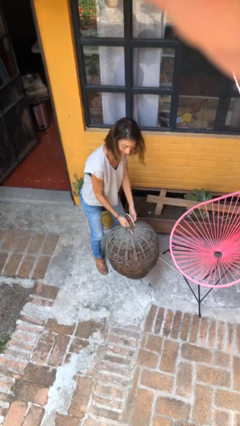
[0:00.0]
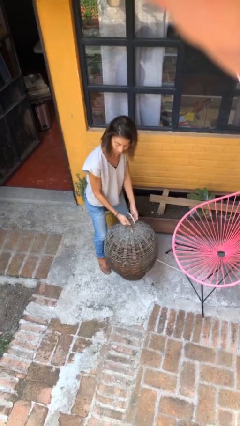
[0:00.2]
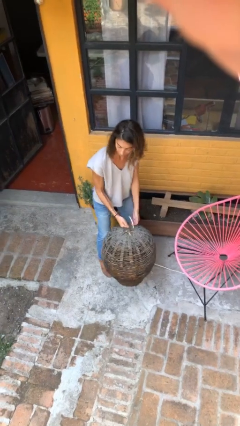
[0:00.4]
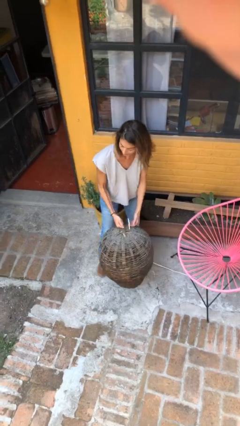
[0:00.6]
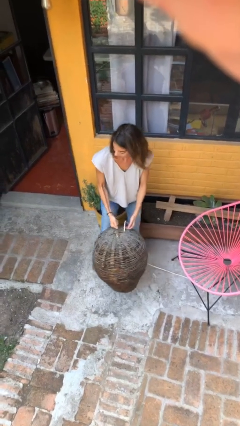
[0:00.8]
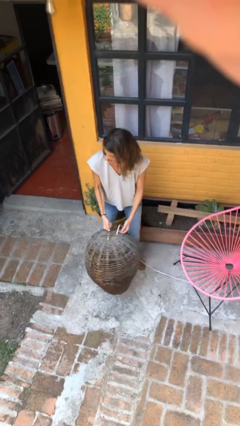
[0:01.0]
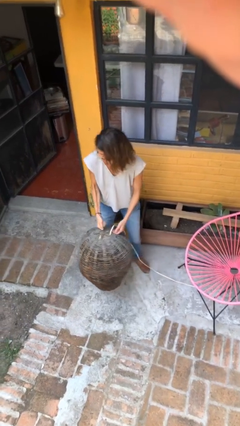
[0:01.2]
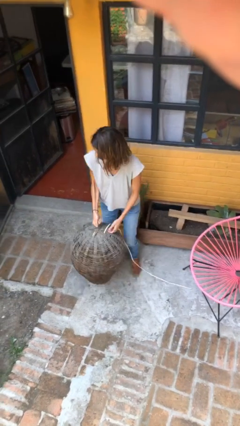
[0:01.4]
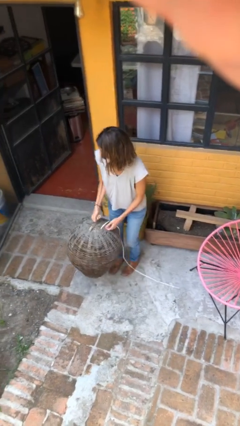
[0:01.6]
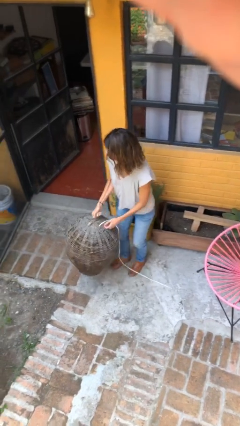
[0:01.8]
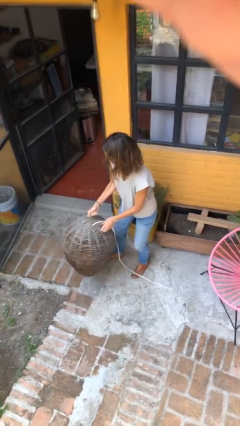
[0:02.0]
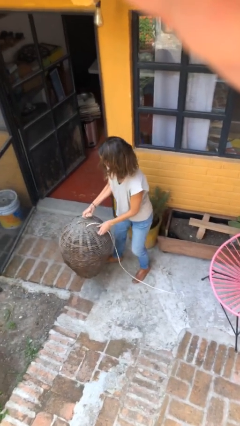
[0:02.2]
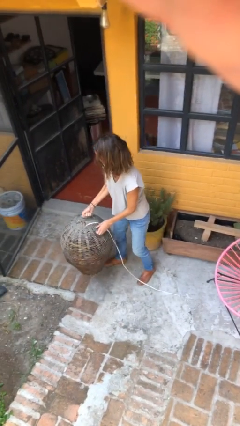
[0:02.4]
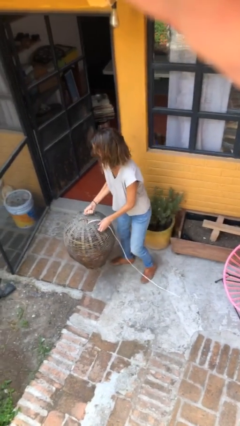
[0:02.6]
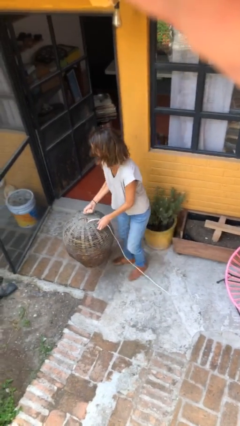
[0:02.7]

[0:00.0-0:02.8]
person carries heavy object

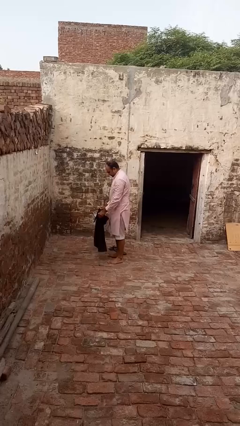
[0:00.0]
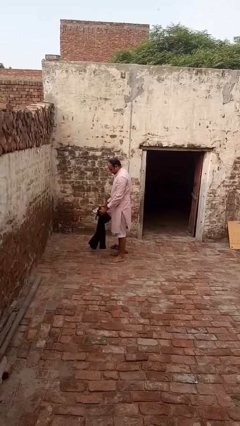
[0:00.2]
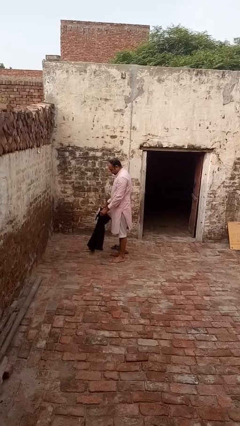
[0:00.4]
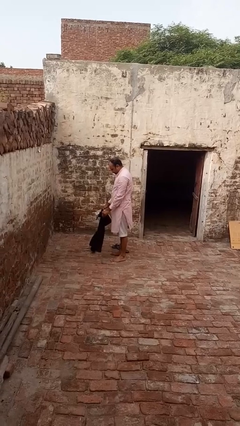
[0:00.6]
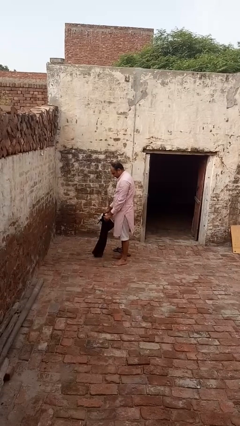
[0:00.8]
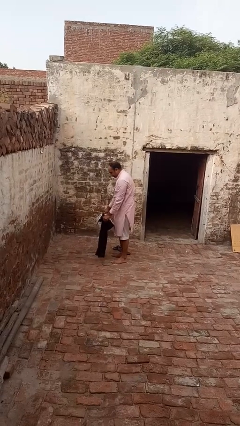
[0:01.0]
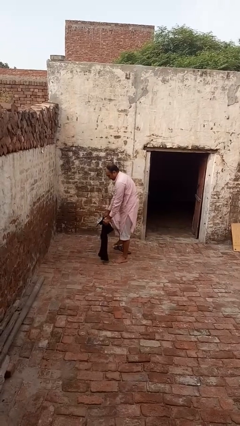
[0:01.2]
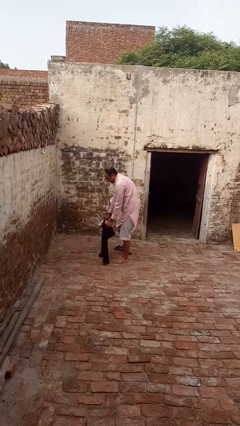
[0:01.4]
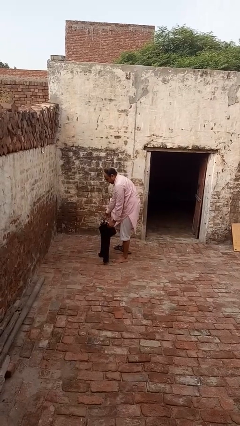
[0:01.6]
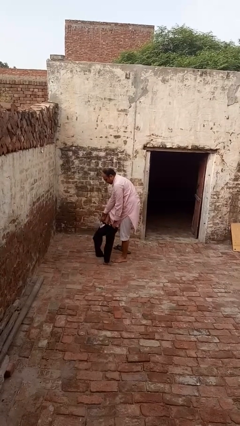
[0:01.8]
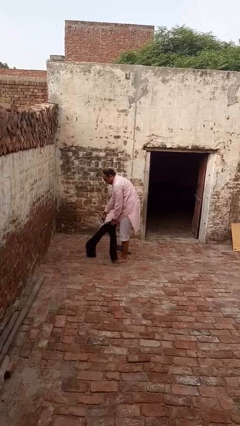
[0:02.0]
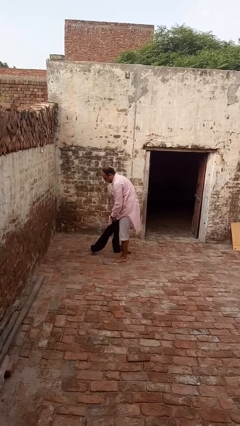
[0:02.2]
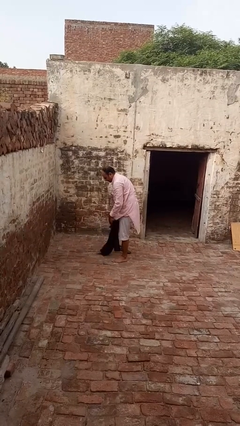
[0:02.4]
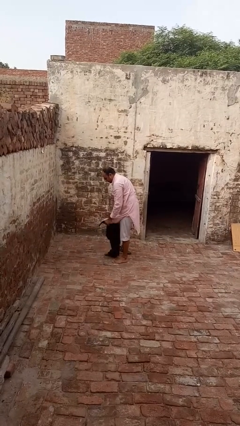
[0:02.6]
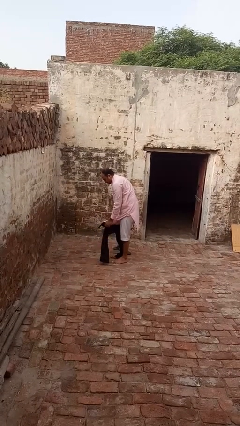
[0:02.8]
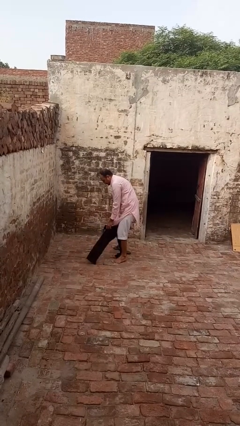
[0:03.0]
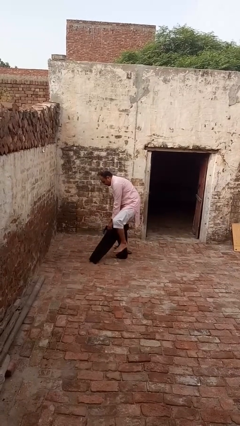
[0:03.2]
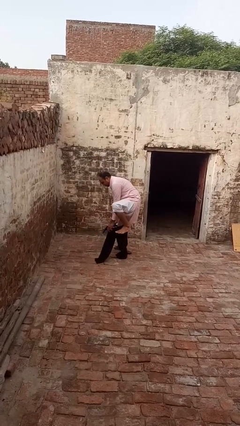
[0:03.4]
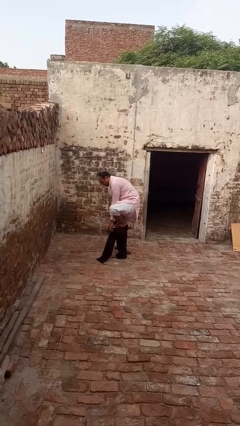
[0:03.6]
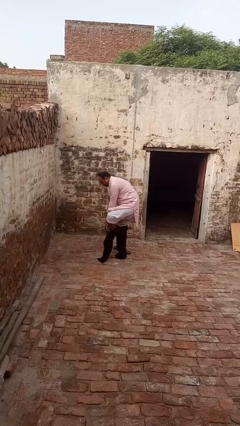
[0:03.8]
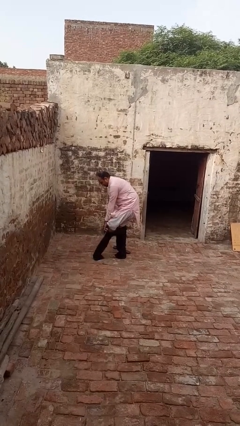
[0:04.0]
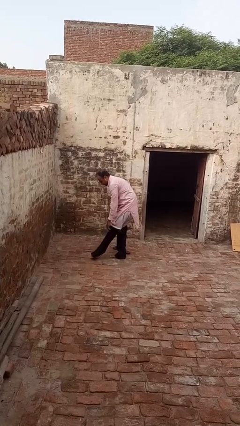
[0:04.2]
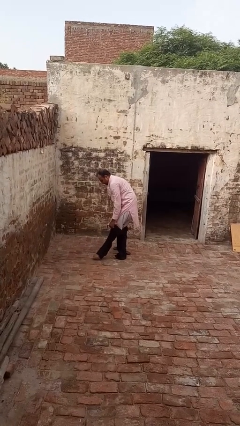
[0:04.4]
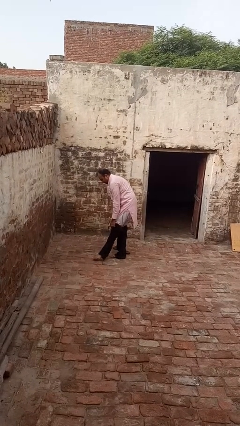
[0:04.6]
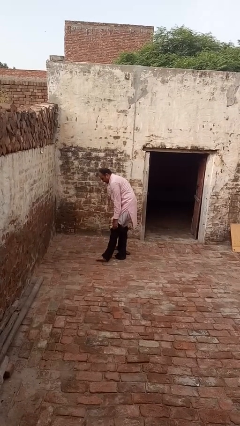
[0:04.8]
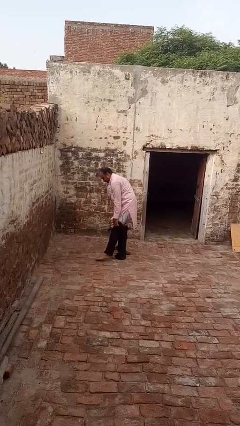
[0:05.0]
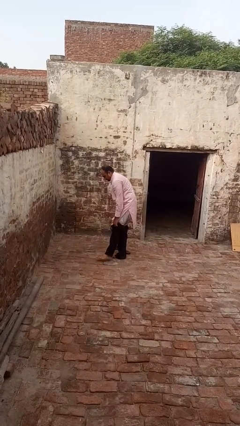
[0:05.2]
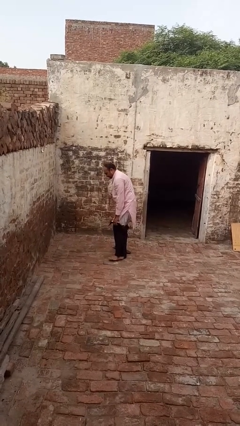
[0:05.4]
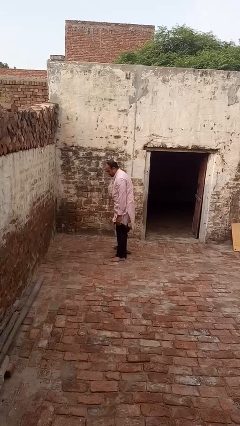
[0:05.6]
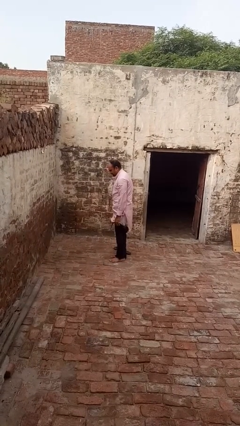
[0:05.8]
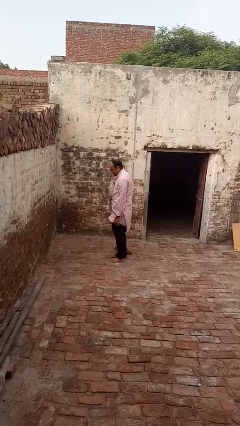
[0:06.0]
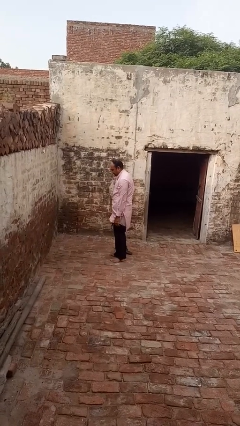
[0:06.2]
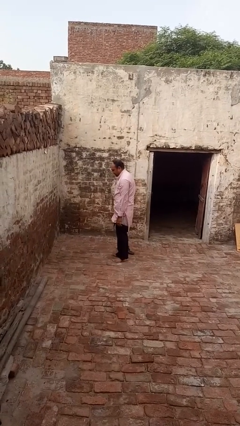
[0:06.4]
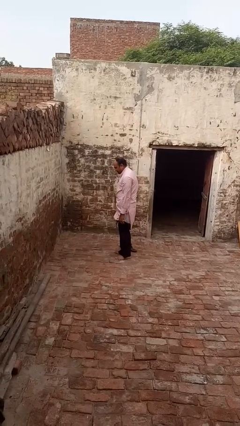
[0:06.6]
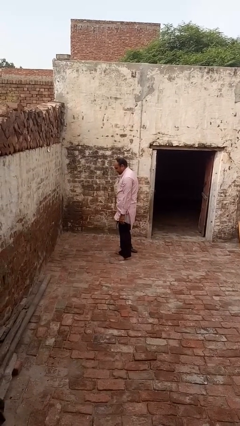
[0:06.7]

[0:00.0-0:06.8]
person puts on pants

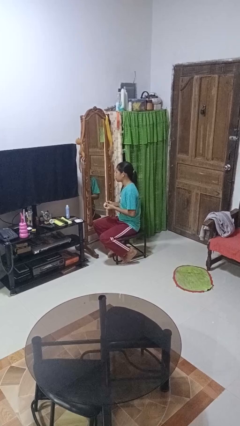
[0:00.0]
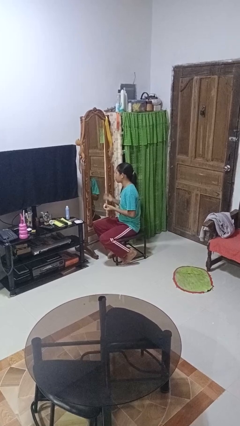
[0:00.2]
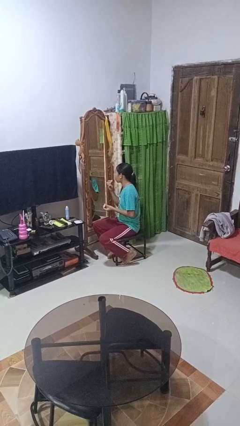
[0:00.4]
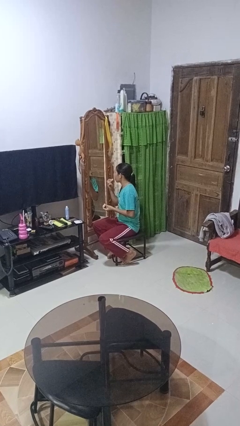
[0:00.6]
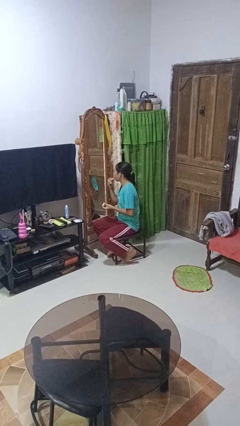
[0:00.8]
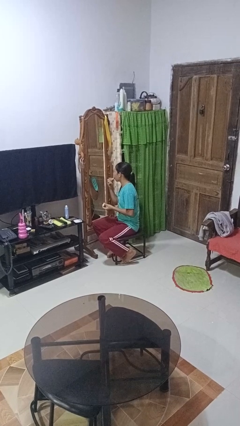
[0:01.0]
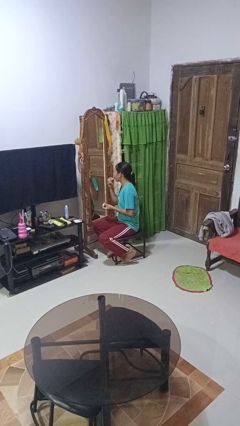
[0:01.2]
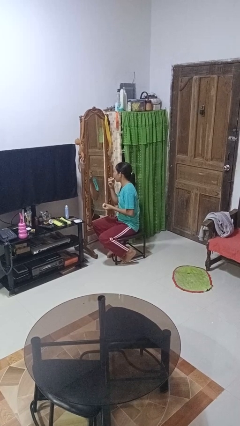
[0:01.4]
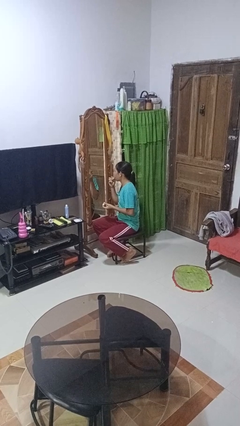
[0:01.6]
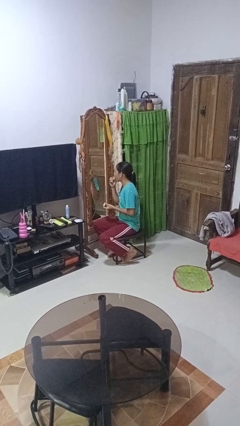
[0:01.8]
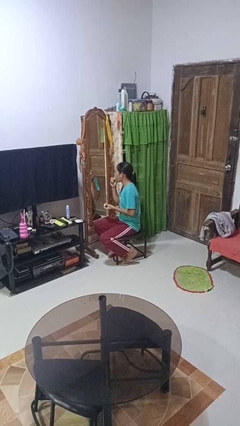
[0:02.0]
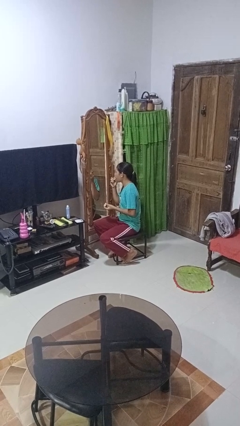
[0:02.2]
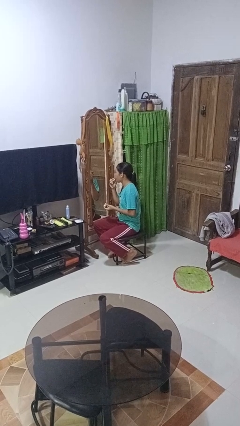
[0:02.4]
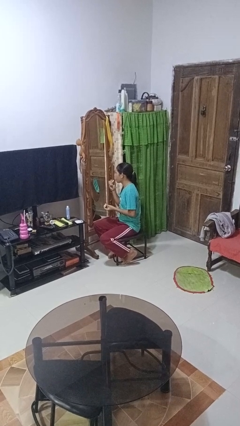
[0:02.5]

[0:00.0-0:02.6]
person applies lip makeup

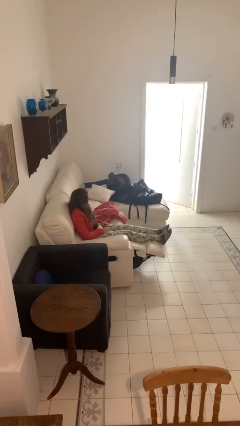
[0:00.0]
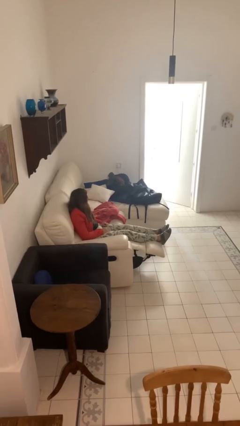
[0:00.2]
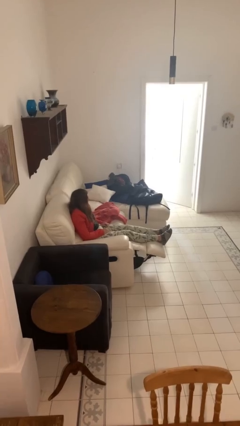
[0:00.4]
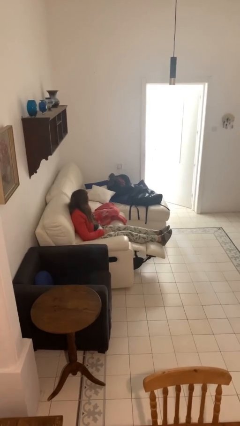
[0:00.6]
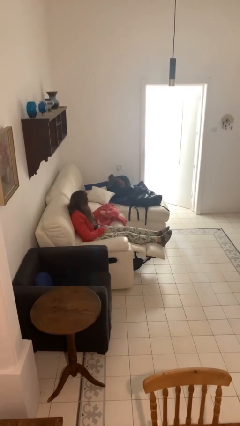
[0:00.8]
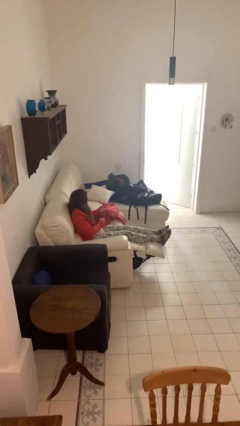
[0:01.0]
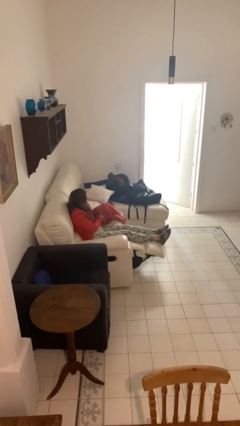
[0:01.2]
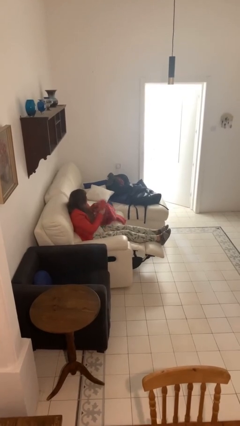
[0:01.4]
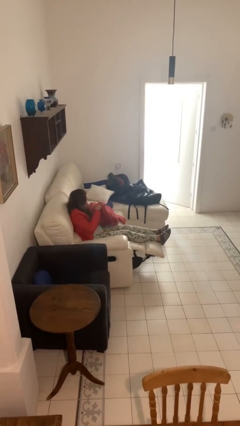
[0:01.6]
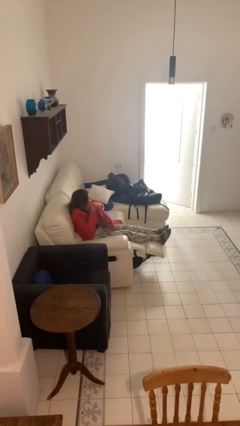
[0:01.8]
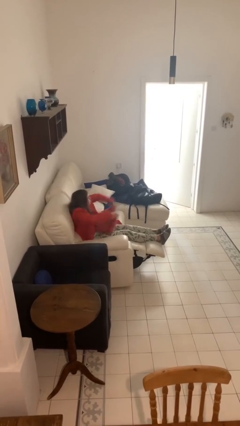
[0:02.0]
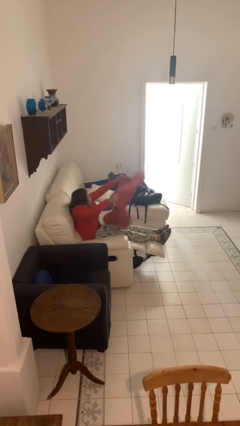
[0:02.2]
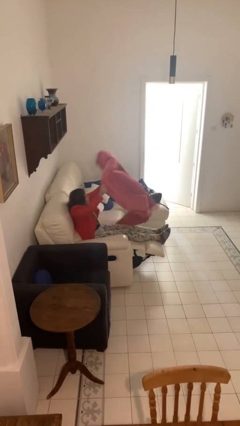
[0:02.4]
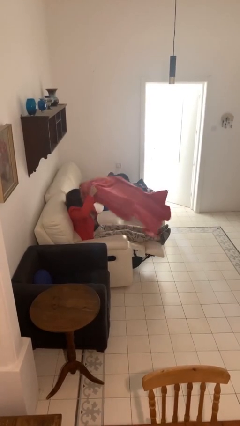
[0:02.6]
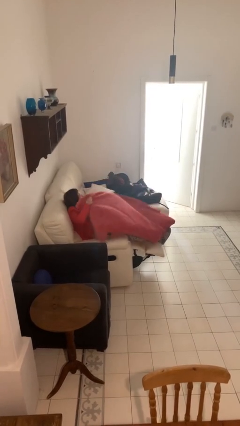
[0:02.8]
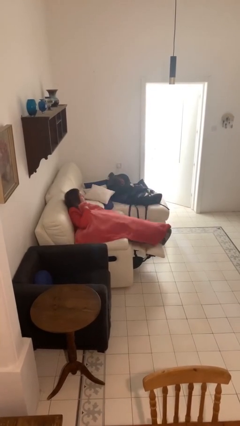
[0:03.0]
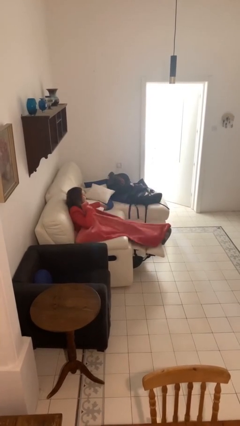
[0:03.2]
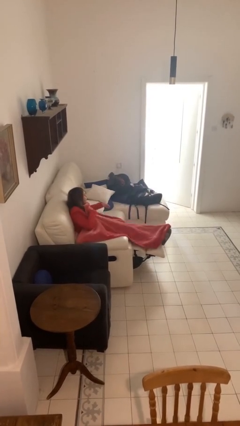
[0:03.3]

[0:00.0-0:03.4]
person covers with blanket

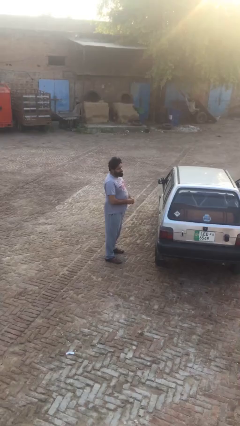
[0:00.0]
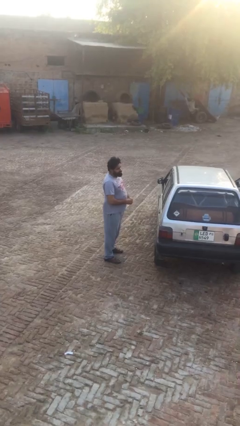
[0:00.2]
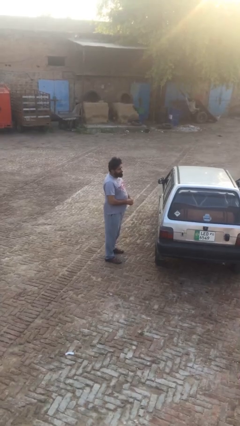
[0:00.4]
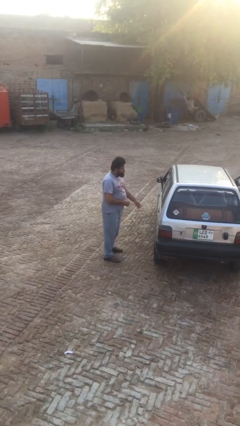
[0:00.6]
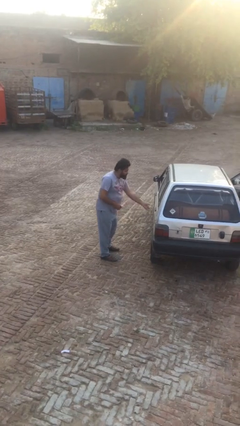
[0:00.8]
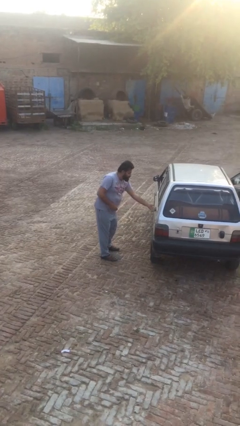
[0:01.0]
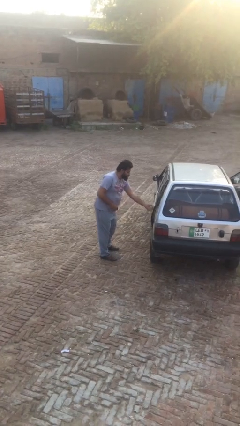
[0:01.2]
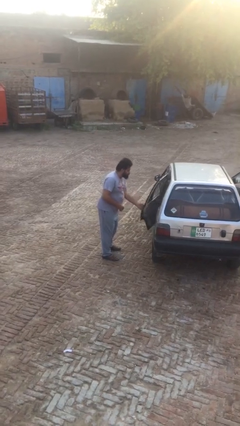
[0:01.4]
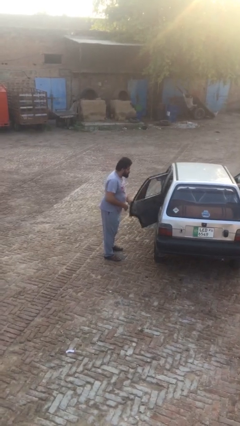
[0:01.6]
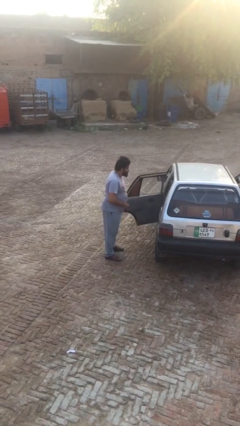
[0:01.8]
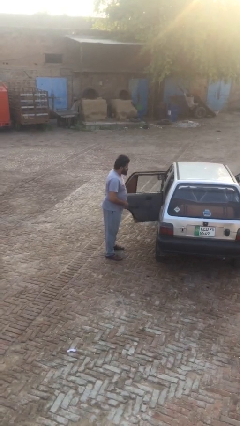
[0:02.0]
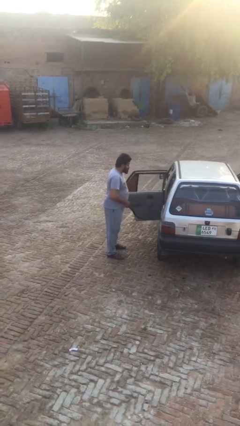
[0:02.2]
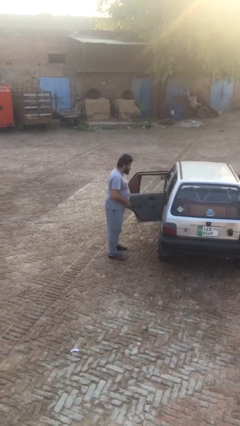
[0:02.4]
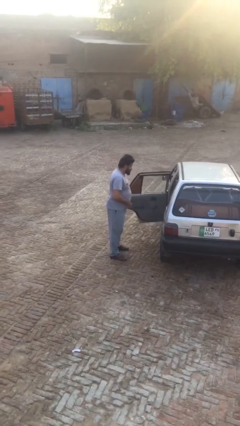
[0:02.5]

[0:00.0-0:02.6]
person opens car door
